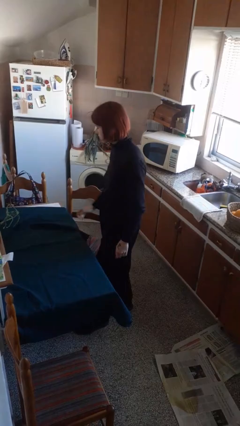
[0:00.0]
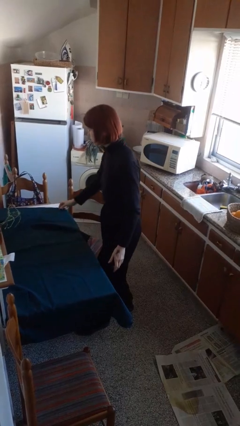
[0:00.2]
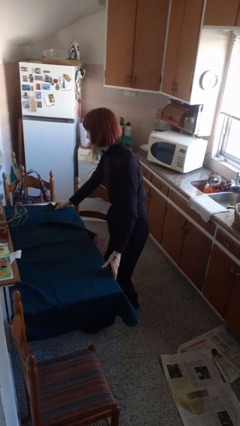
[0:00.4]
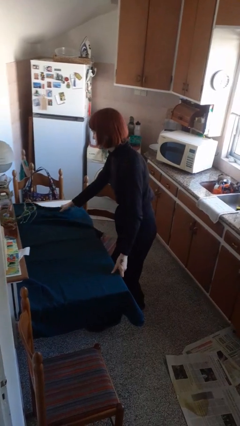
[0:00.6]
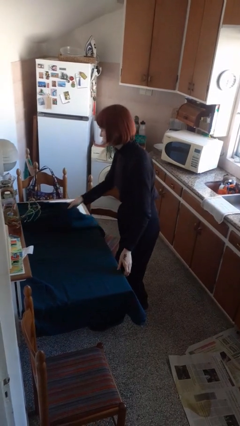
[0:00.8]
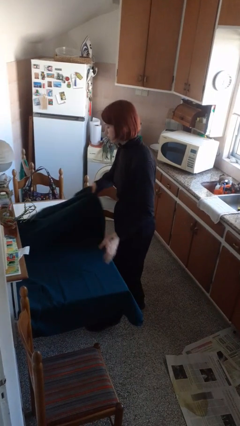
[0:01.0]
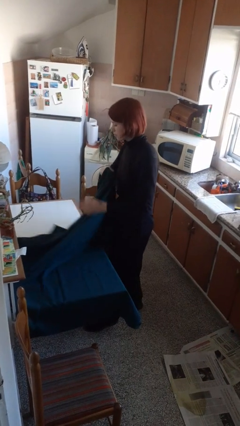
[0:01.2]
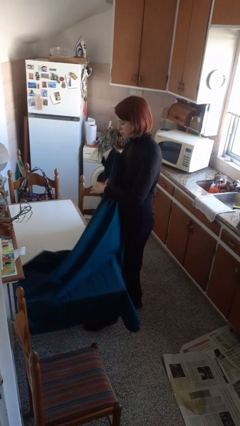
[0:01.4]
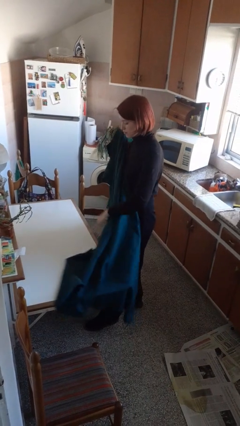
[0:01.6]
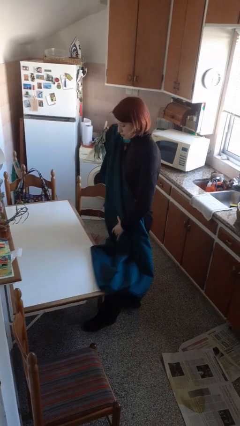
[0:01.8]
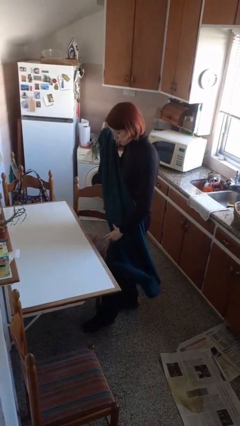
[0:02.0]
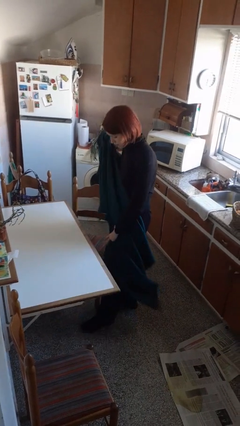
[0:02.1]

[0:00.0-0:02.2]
person folds tablecloth

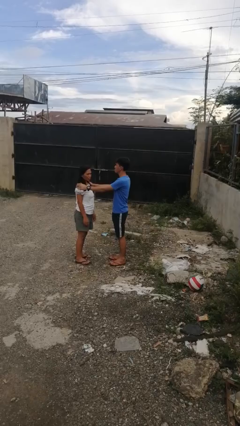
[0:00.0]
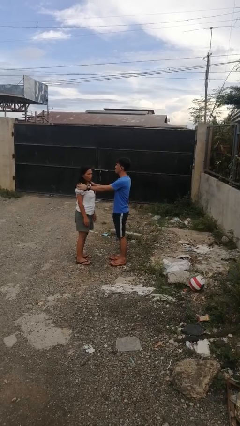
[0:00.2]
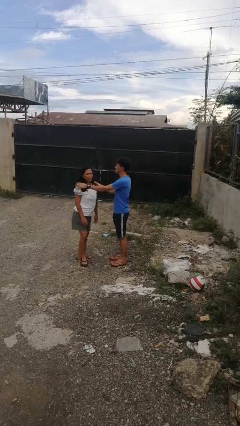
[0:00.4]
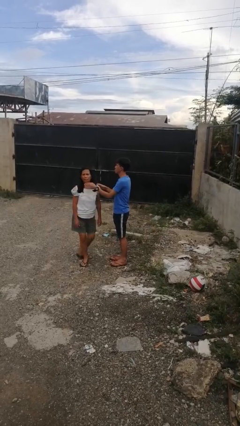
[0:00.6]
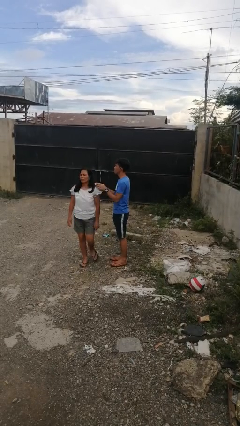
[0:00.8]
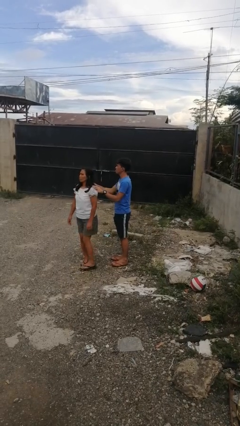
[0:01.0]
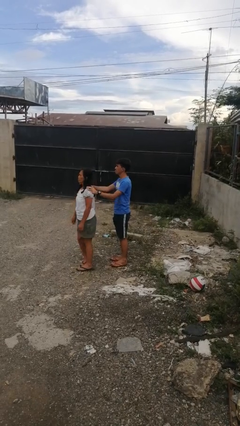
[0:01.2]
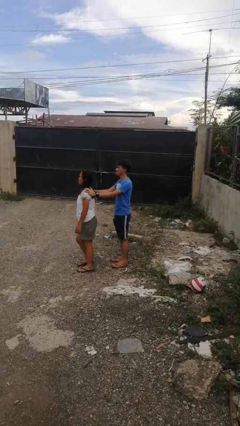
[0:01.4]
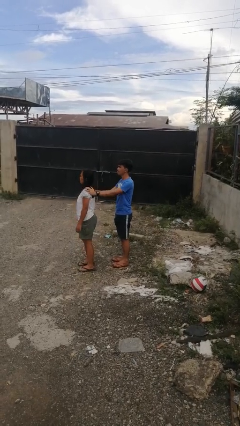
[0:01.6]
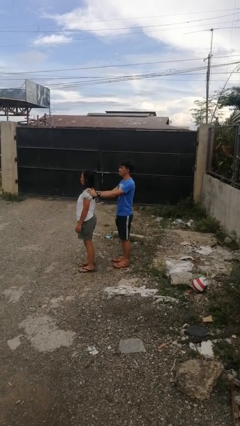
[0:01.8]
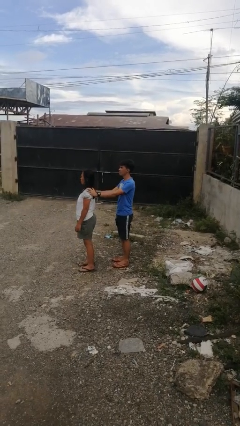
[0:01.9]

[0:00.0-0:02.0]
person spins person around

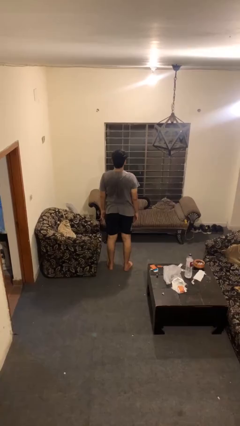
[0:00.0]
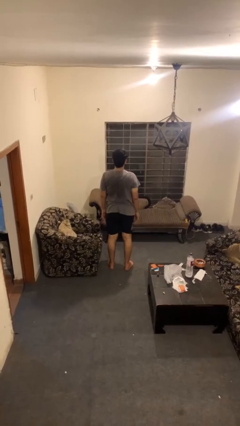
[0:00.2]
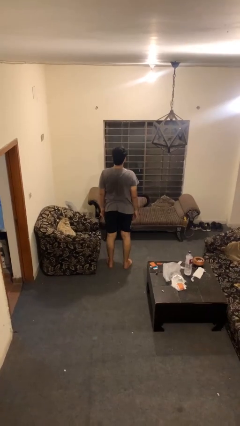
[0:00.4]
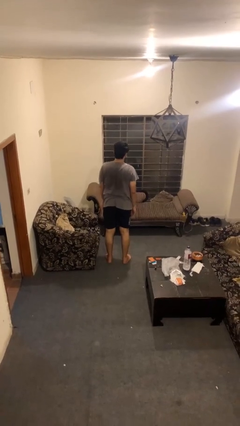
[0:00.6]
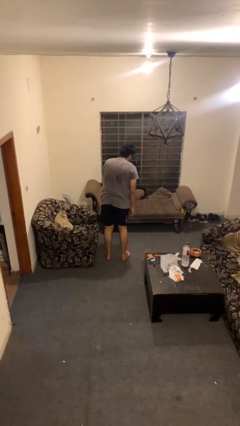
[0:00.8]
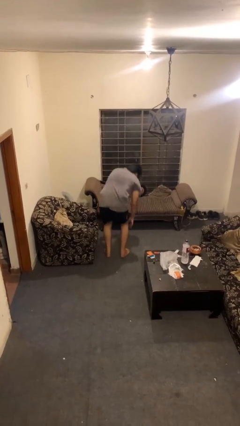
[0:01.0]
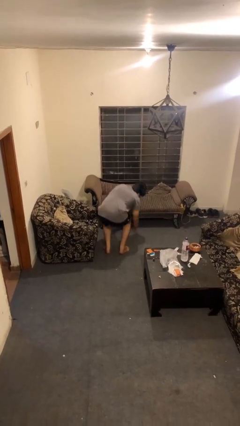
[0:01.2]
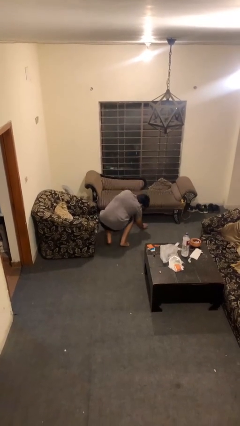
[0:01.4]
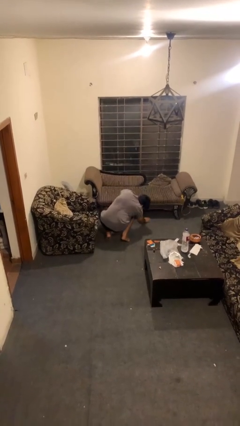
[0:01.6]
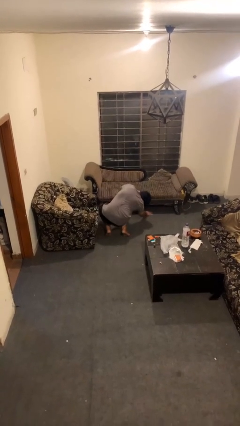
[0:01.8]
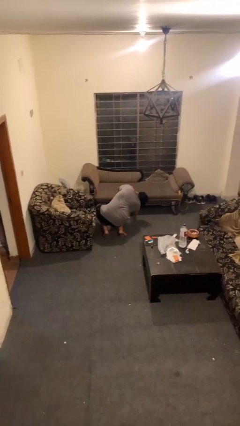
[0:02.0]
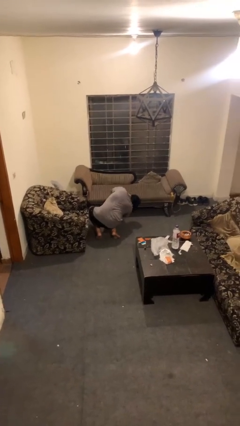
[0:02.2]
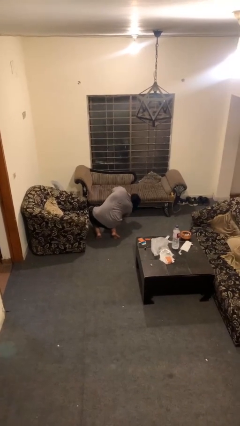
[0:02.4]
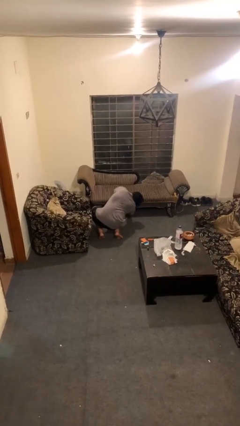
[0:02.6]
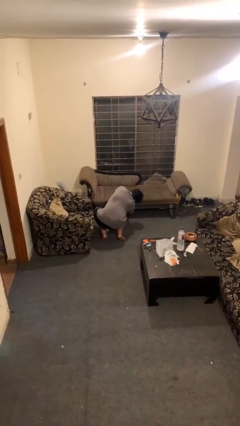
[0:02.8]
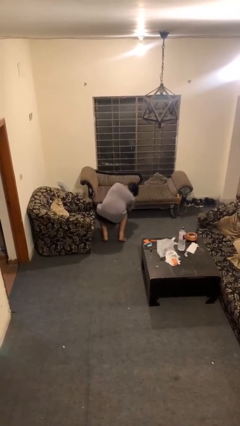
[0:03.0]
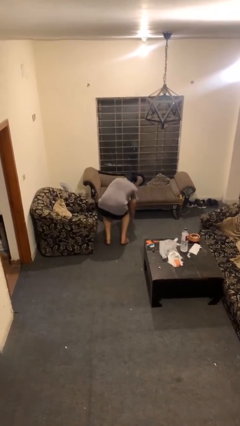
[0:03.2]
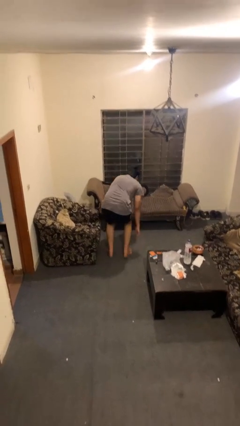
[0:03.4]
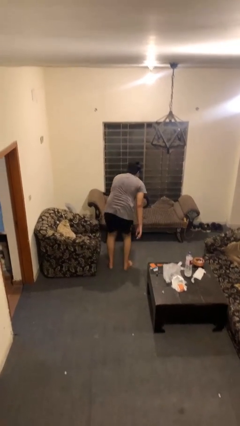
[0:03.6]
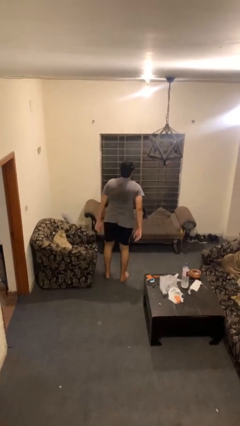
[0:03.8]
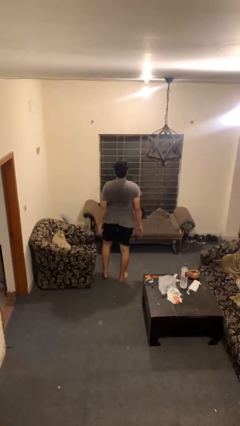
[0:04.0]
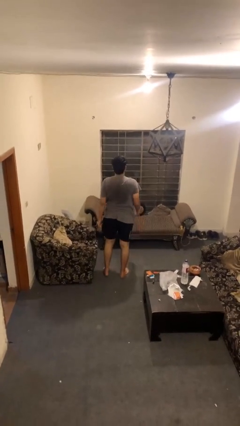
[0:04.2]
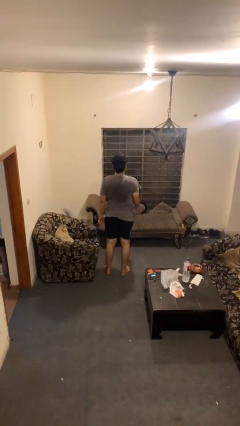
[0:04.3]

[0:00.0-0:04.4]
person searches under couch

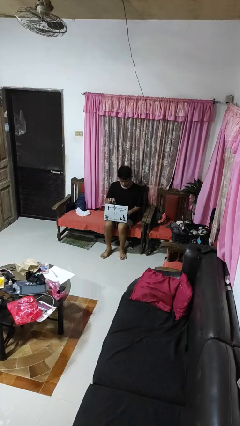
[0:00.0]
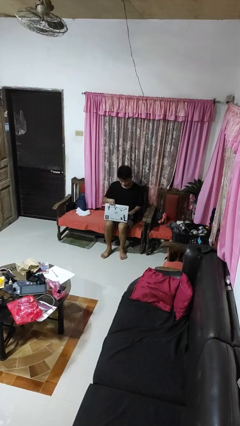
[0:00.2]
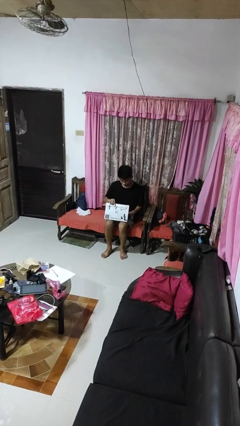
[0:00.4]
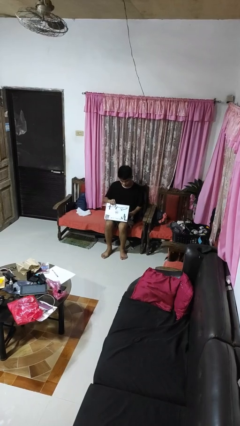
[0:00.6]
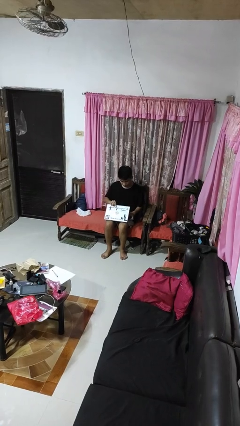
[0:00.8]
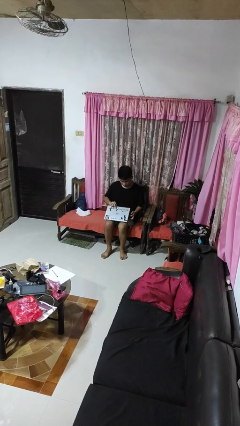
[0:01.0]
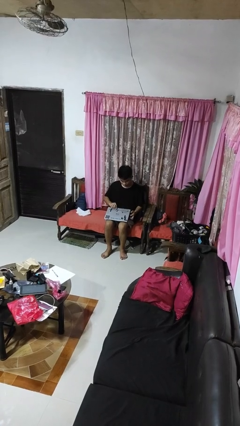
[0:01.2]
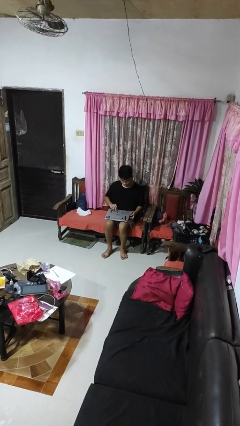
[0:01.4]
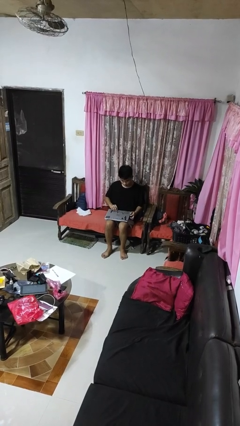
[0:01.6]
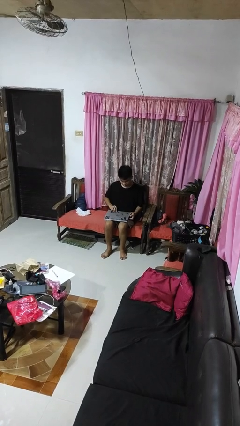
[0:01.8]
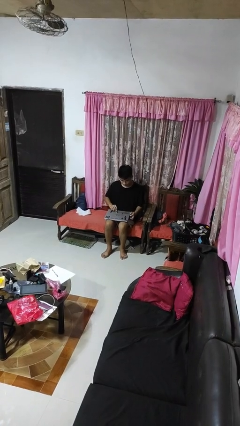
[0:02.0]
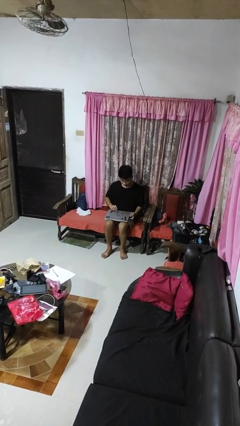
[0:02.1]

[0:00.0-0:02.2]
person closes laptop

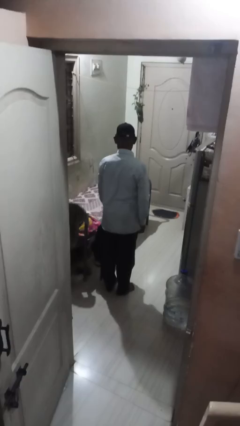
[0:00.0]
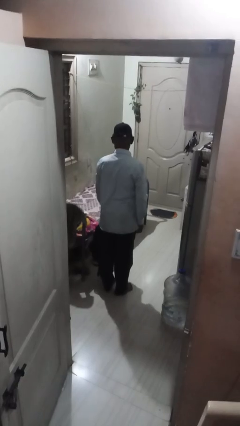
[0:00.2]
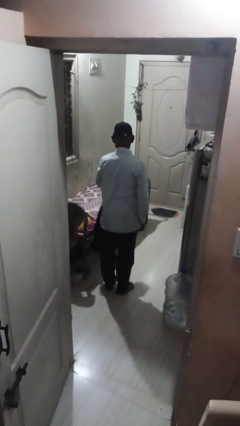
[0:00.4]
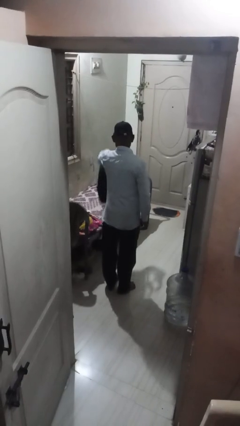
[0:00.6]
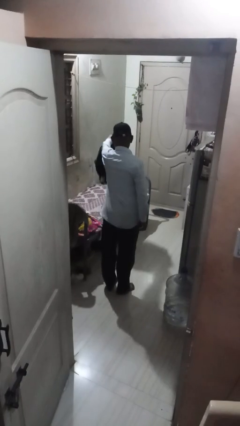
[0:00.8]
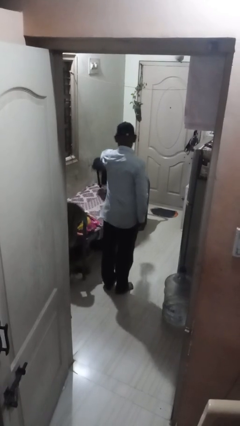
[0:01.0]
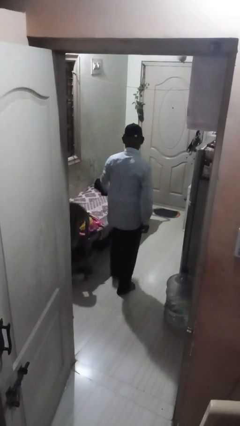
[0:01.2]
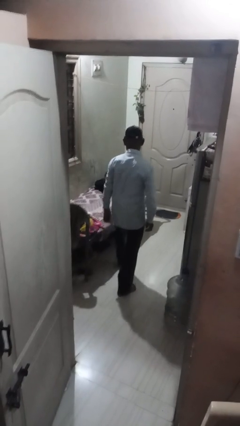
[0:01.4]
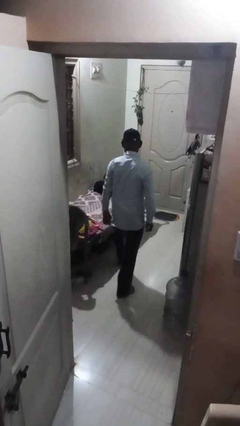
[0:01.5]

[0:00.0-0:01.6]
person throws object on bed

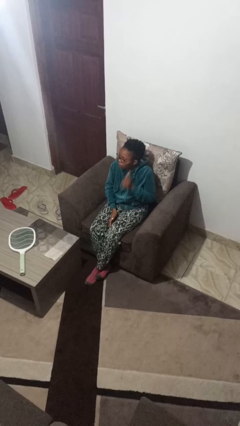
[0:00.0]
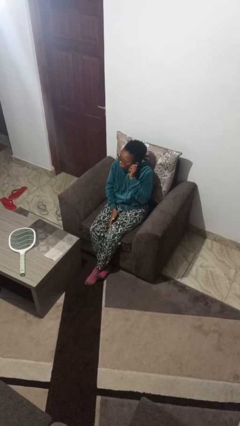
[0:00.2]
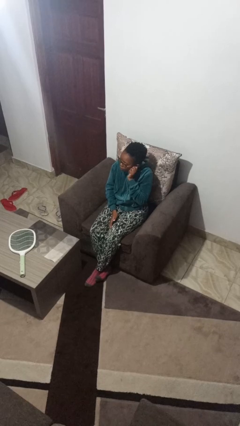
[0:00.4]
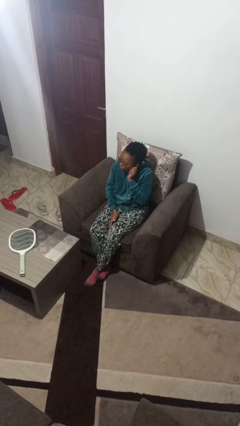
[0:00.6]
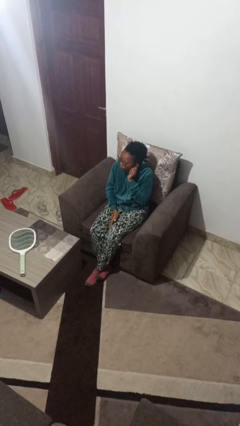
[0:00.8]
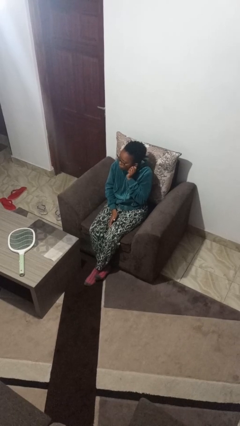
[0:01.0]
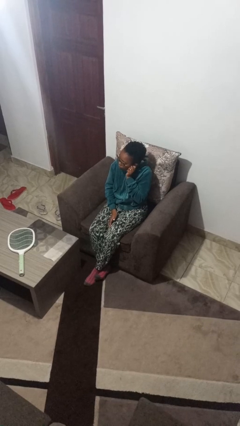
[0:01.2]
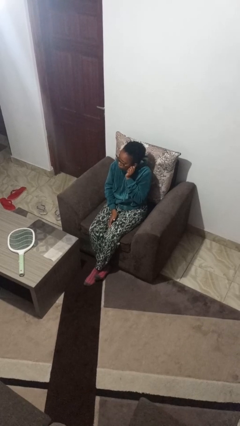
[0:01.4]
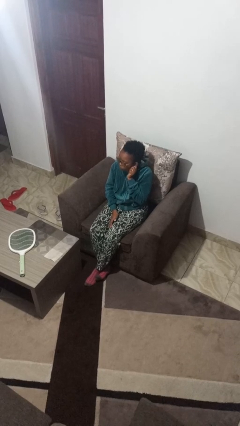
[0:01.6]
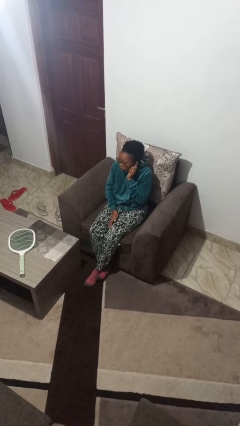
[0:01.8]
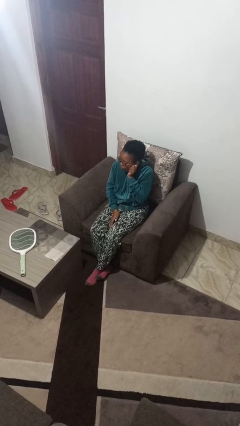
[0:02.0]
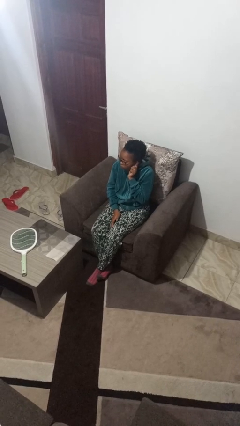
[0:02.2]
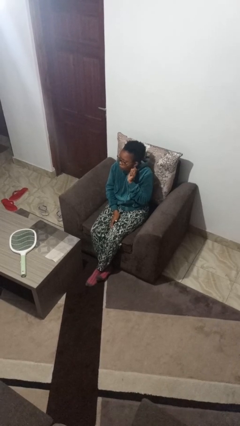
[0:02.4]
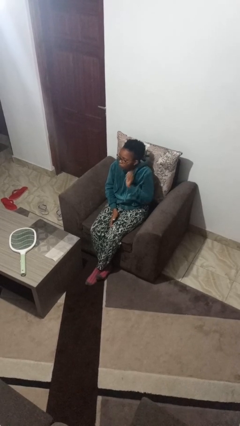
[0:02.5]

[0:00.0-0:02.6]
person touches earlobe

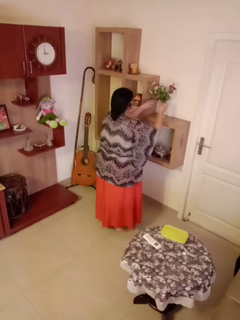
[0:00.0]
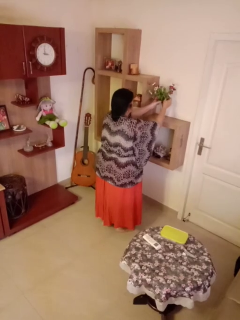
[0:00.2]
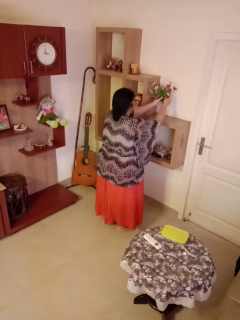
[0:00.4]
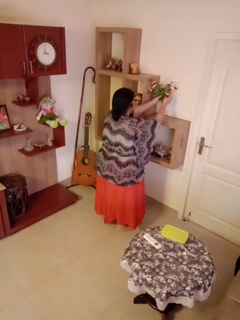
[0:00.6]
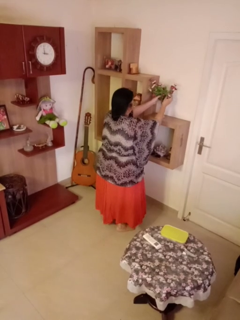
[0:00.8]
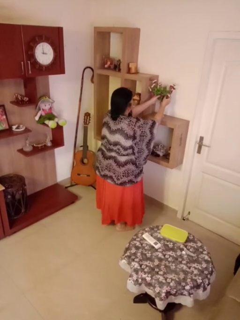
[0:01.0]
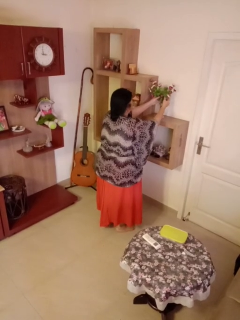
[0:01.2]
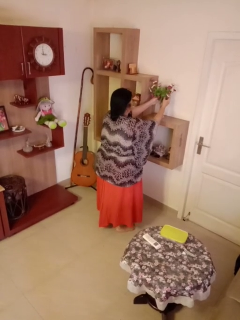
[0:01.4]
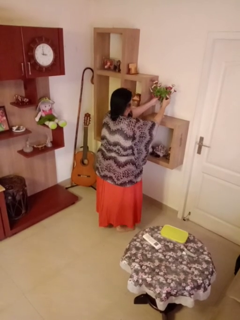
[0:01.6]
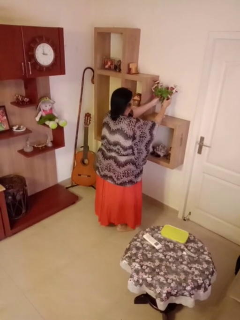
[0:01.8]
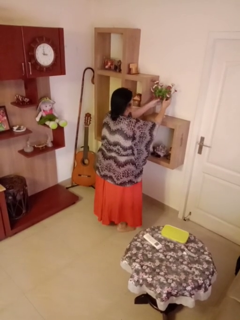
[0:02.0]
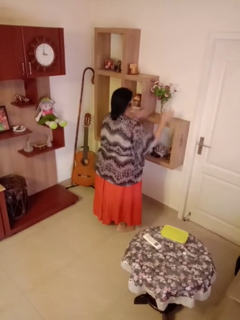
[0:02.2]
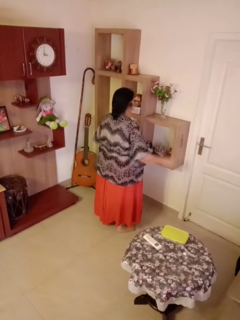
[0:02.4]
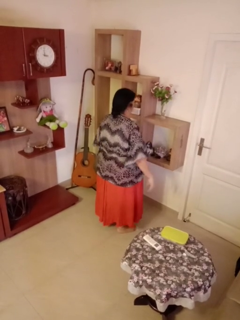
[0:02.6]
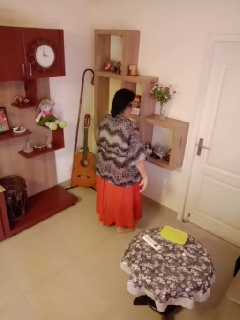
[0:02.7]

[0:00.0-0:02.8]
person arranges flowers in vase
